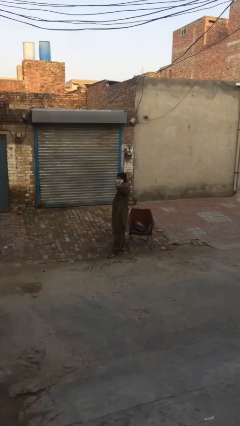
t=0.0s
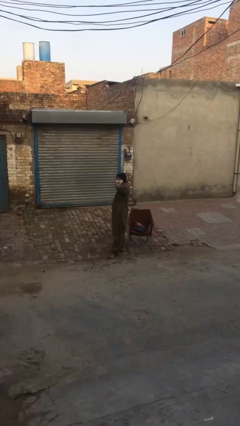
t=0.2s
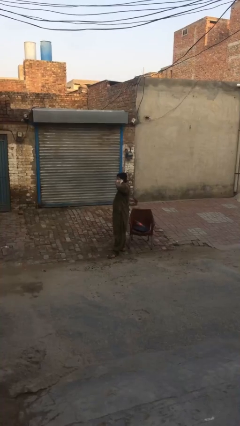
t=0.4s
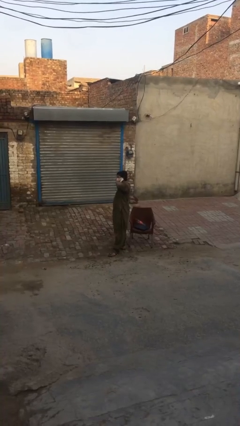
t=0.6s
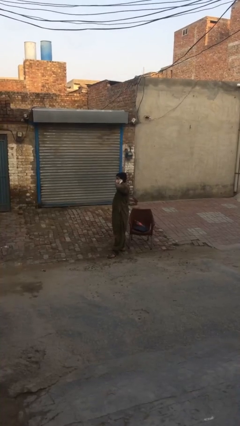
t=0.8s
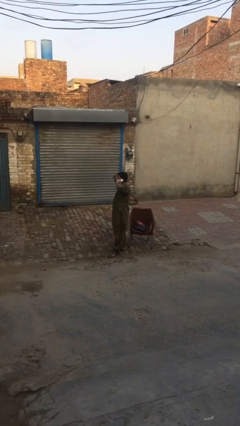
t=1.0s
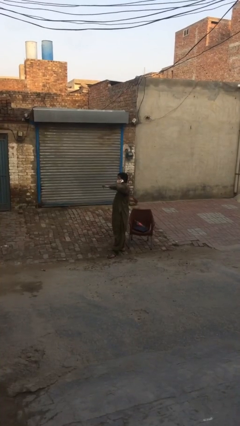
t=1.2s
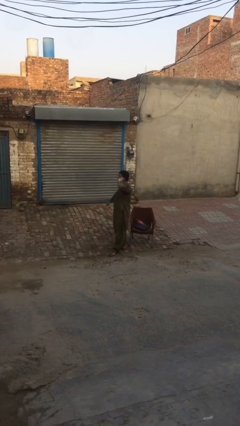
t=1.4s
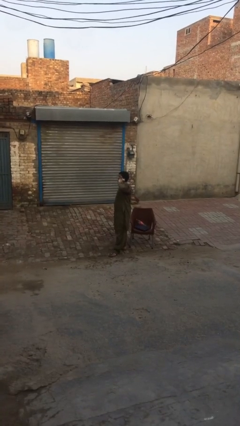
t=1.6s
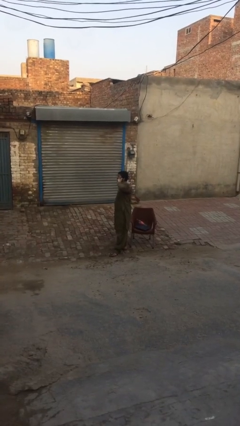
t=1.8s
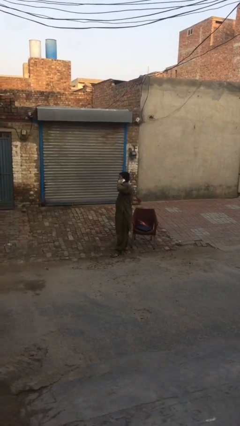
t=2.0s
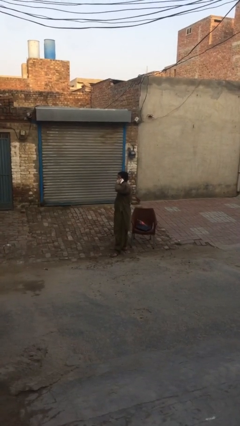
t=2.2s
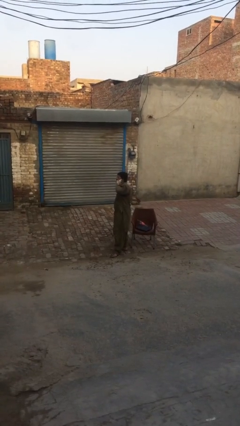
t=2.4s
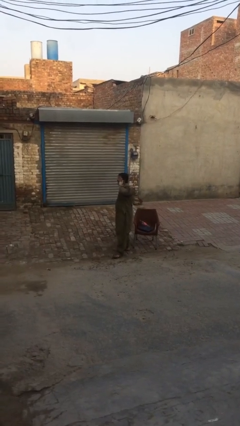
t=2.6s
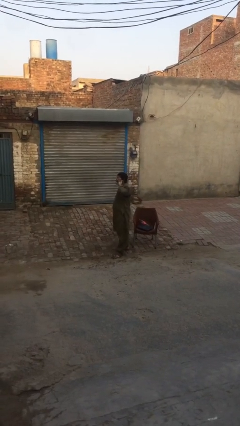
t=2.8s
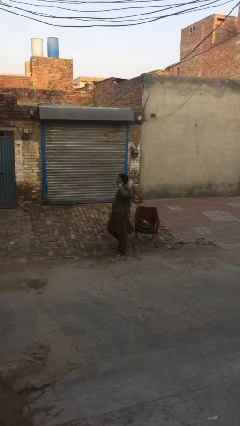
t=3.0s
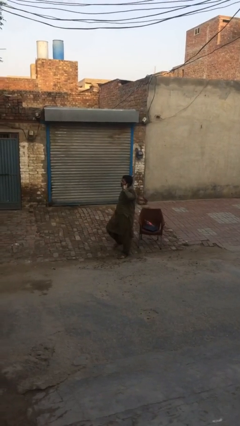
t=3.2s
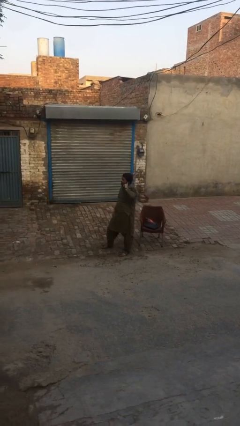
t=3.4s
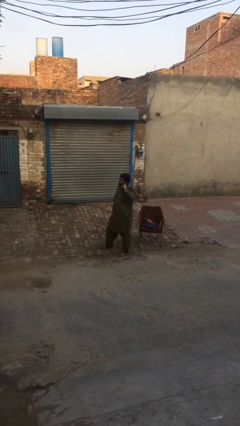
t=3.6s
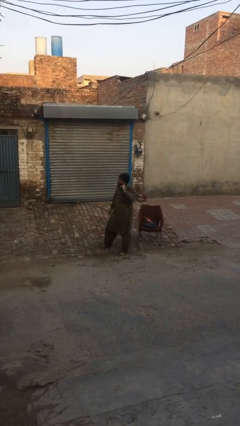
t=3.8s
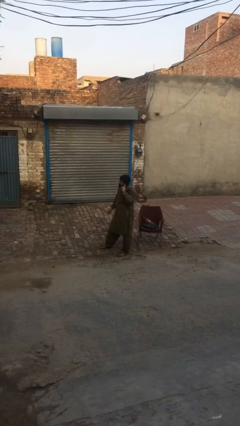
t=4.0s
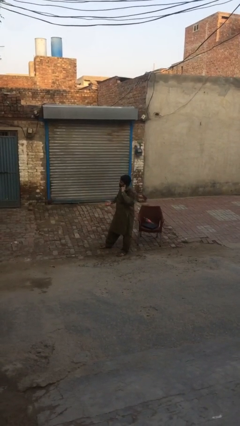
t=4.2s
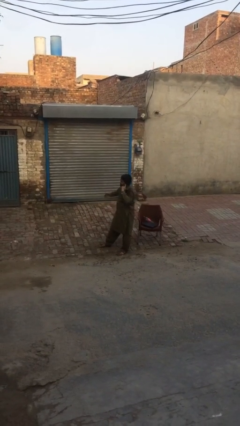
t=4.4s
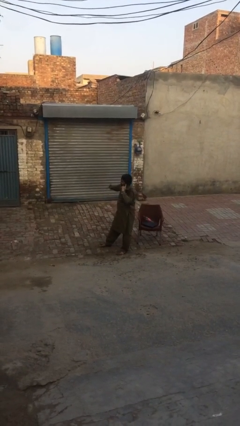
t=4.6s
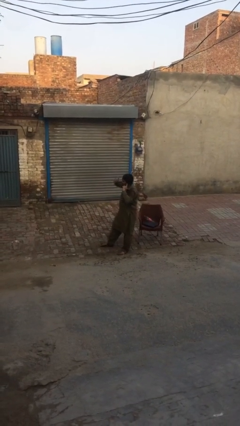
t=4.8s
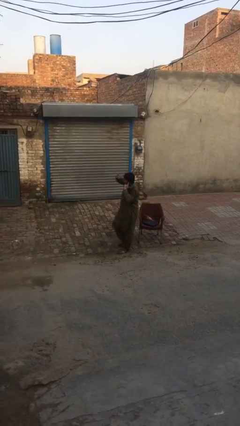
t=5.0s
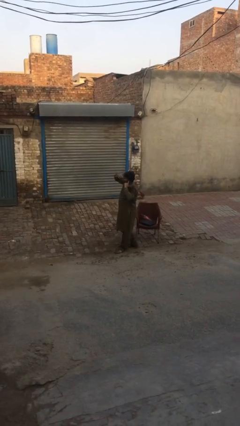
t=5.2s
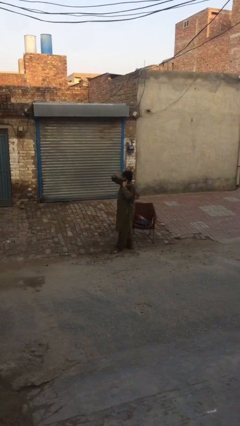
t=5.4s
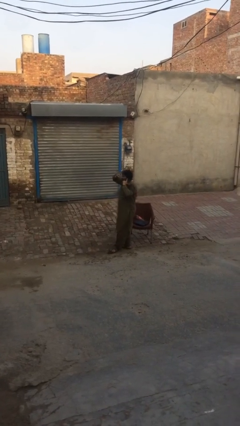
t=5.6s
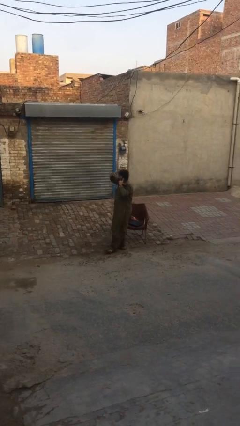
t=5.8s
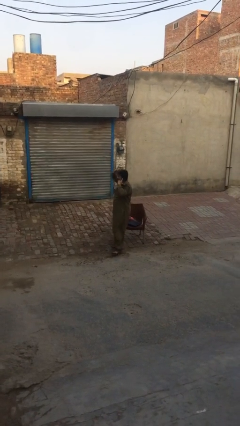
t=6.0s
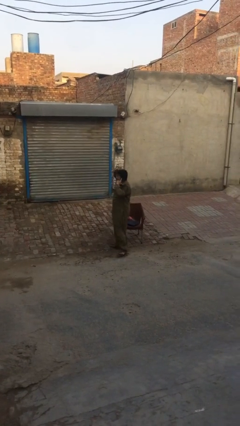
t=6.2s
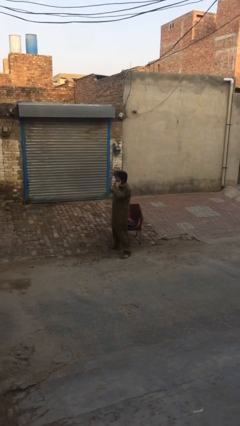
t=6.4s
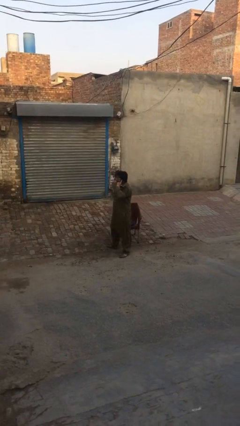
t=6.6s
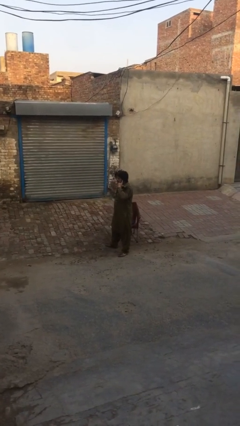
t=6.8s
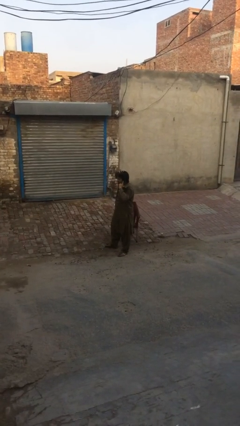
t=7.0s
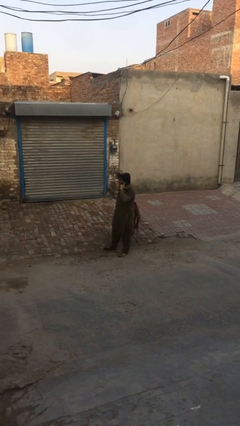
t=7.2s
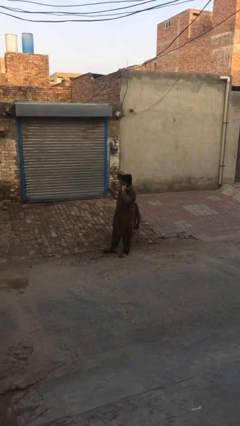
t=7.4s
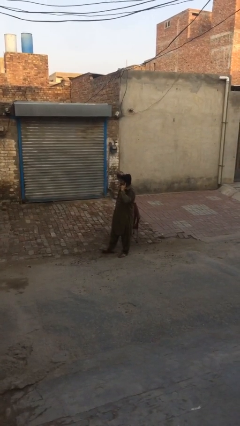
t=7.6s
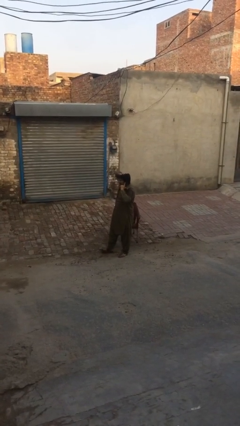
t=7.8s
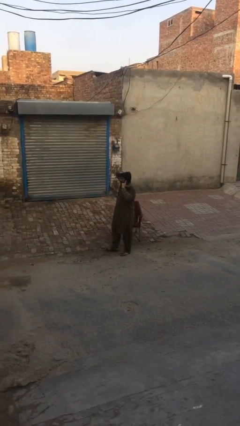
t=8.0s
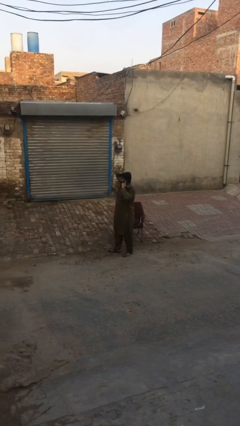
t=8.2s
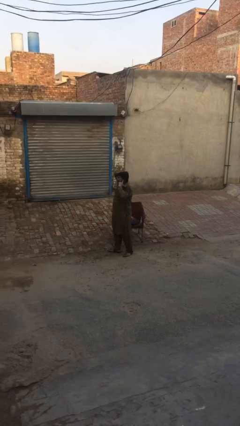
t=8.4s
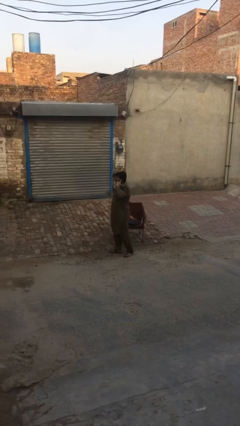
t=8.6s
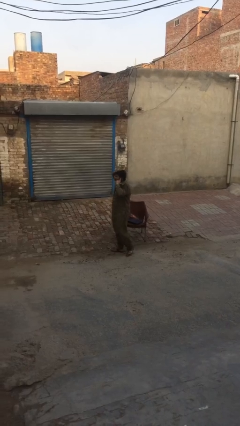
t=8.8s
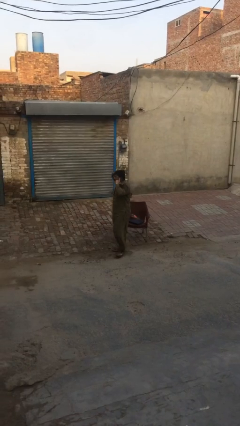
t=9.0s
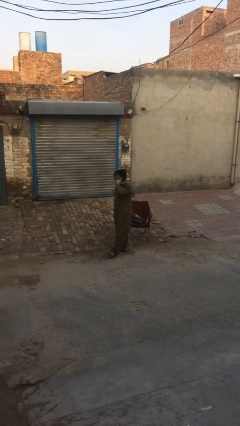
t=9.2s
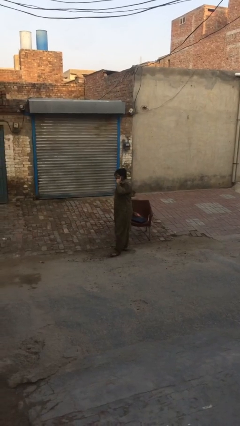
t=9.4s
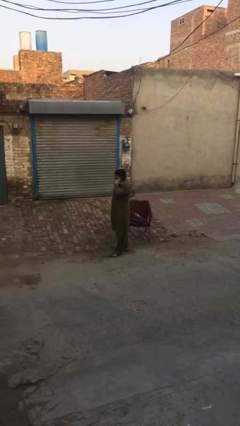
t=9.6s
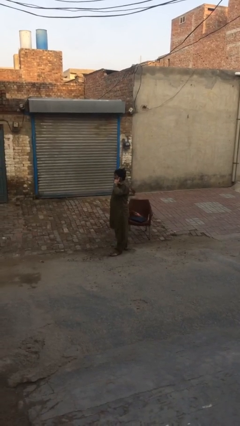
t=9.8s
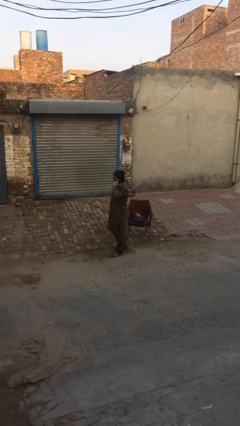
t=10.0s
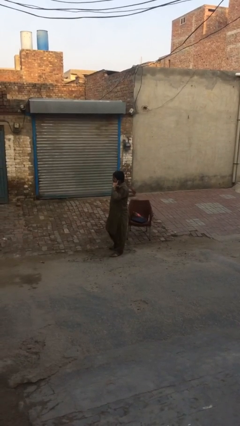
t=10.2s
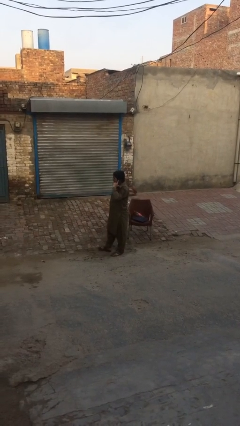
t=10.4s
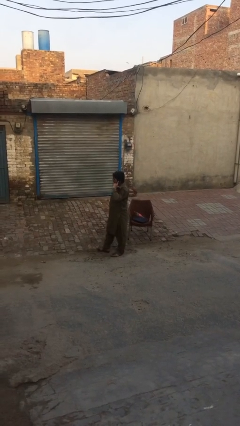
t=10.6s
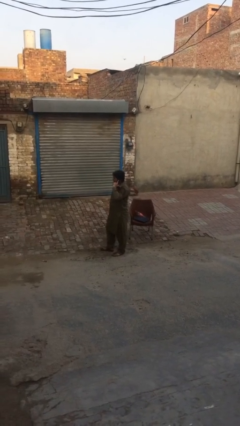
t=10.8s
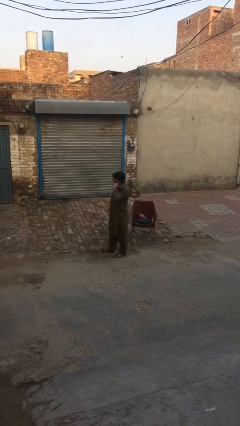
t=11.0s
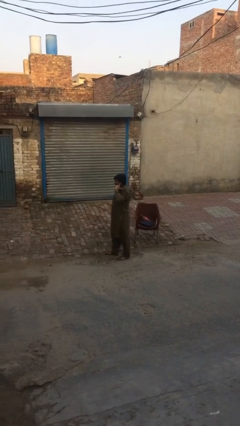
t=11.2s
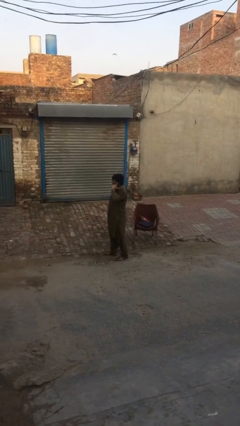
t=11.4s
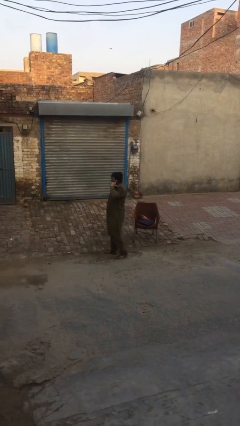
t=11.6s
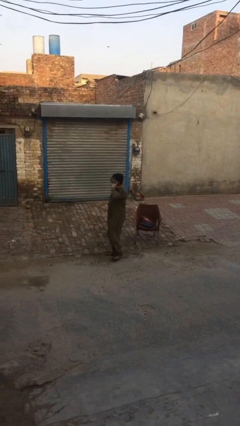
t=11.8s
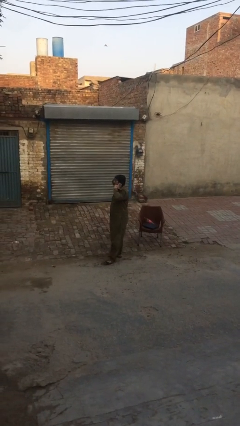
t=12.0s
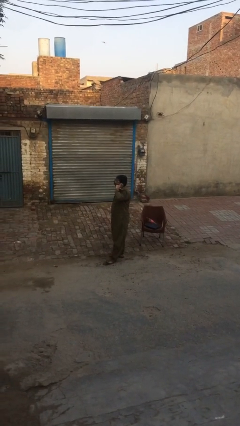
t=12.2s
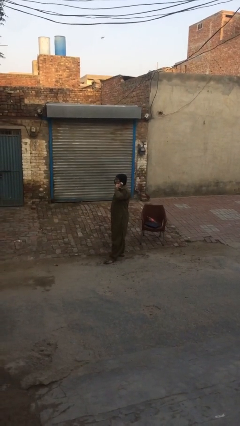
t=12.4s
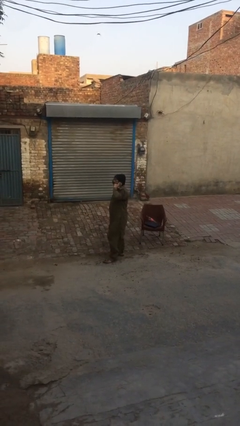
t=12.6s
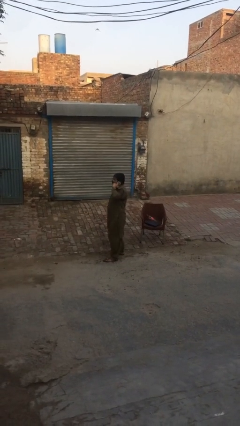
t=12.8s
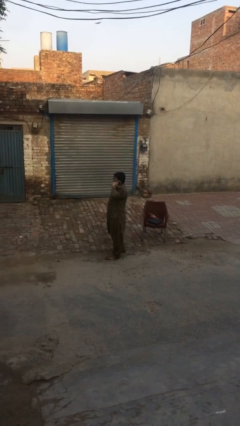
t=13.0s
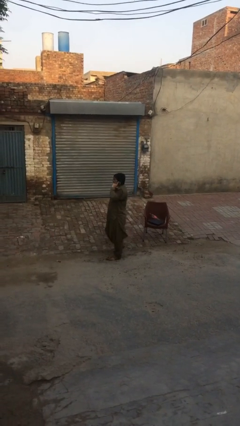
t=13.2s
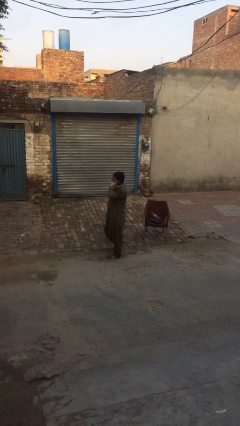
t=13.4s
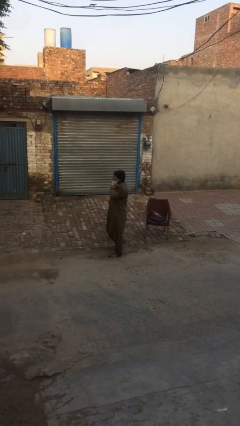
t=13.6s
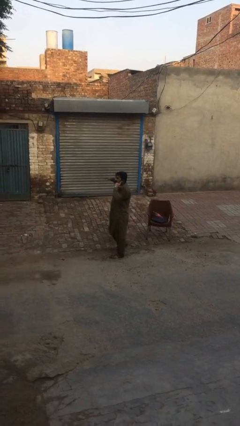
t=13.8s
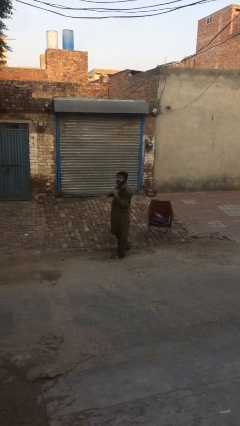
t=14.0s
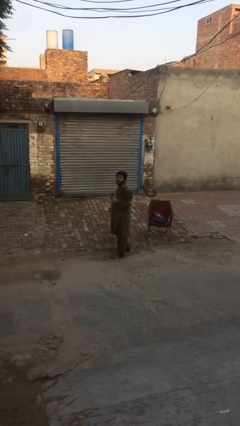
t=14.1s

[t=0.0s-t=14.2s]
person talks on phone

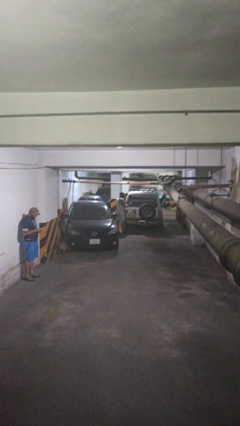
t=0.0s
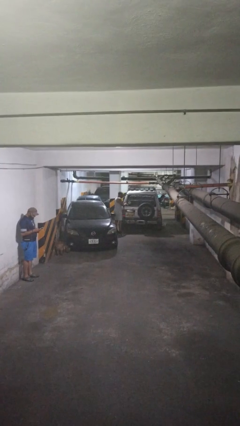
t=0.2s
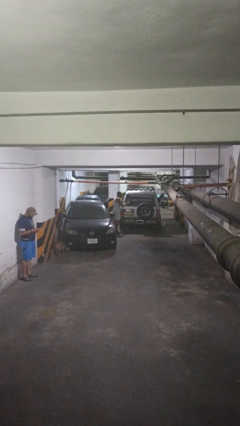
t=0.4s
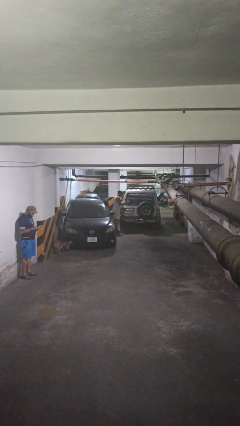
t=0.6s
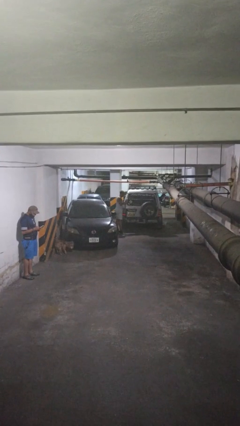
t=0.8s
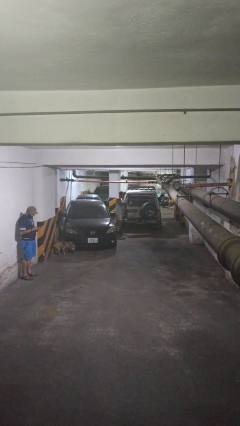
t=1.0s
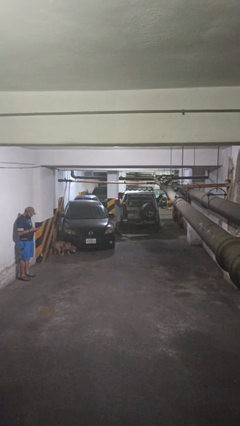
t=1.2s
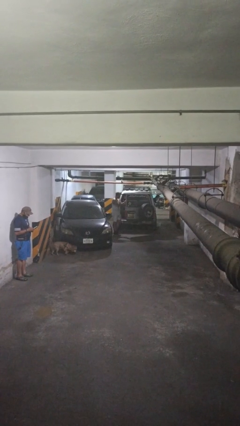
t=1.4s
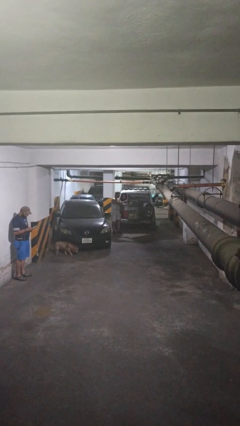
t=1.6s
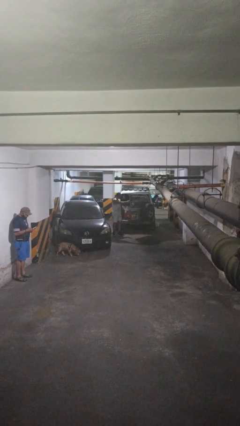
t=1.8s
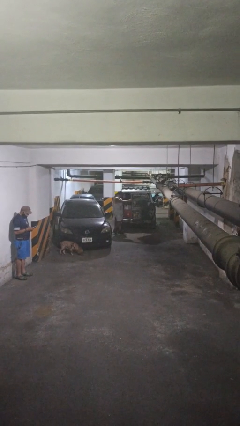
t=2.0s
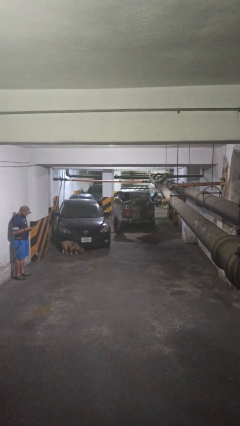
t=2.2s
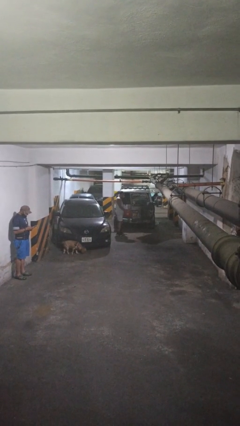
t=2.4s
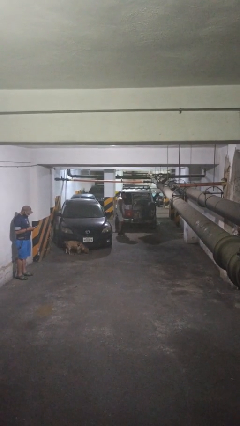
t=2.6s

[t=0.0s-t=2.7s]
person opens car trunk

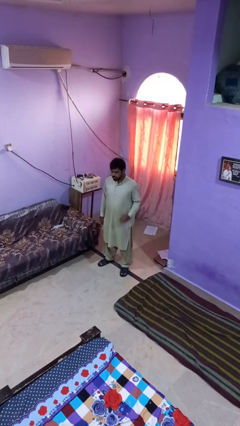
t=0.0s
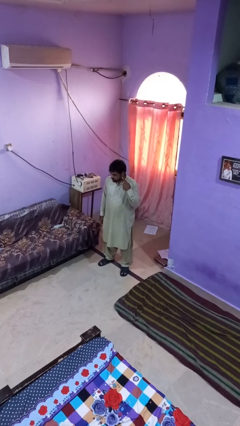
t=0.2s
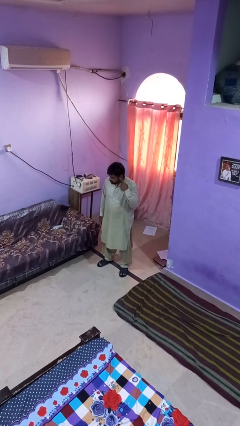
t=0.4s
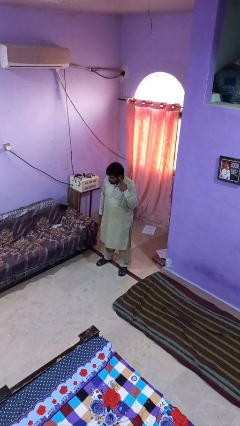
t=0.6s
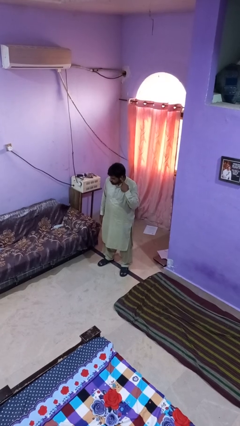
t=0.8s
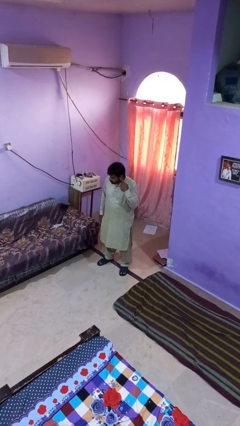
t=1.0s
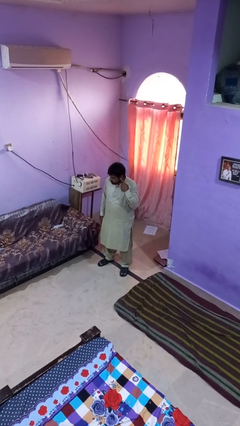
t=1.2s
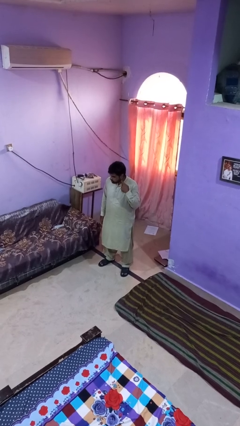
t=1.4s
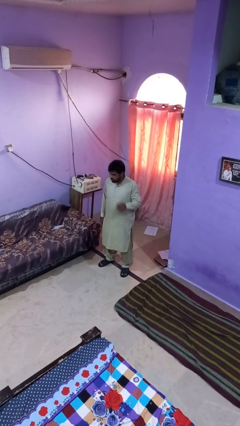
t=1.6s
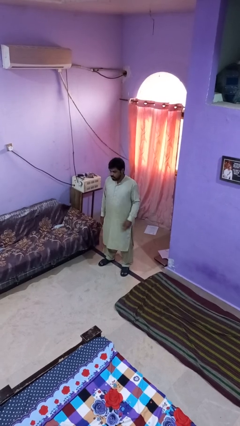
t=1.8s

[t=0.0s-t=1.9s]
person gestures listen closely
